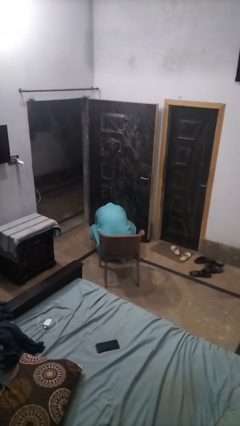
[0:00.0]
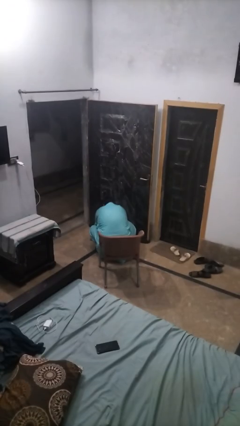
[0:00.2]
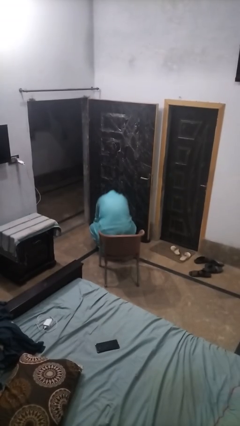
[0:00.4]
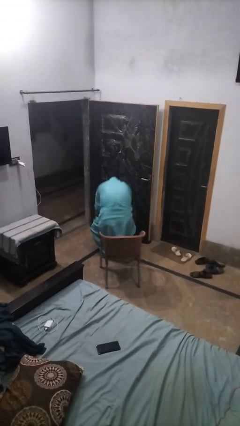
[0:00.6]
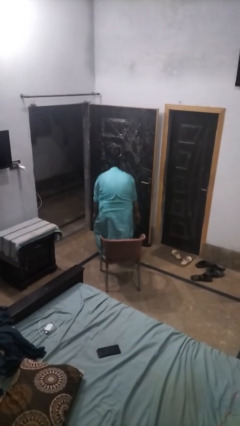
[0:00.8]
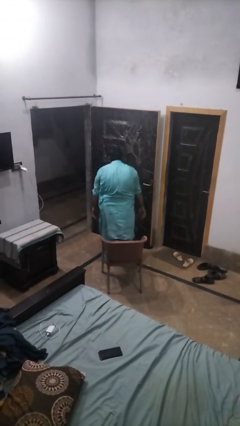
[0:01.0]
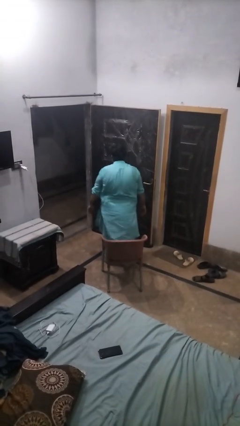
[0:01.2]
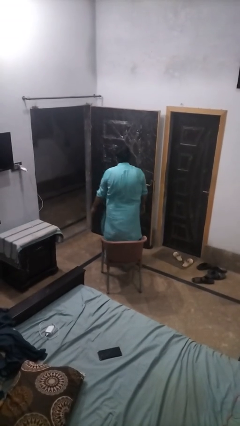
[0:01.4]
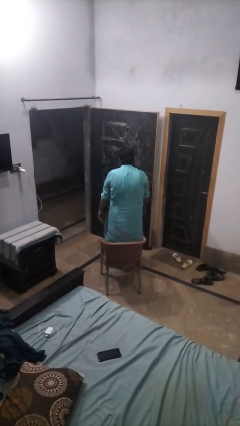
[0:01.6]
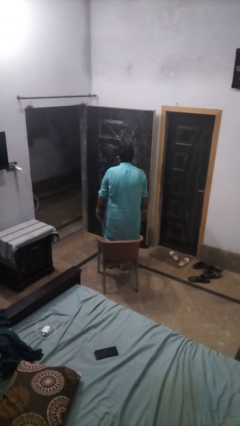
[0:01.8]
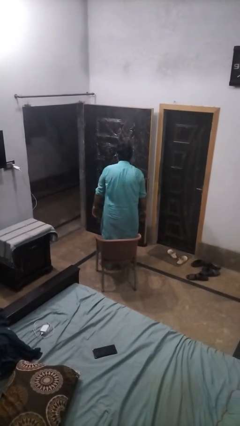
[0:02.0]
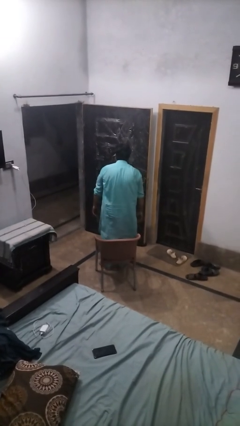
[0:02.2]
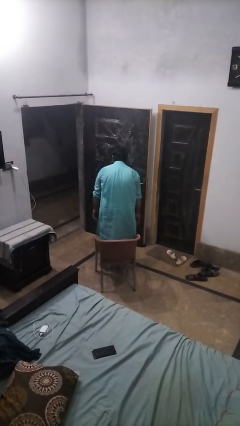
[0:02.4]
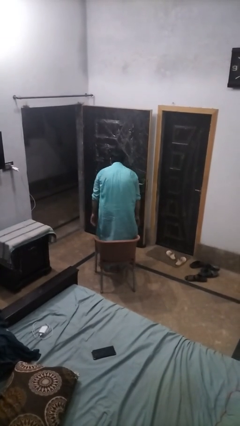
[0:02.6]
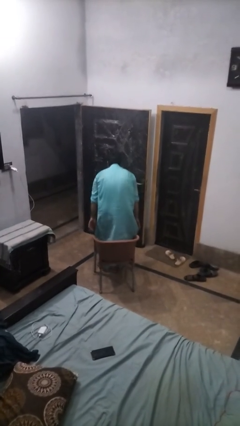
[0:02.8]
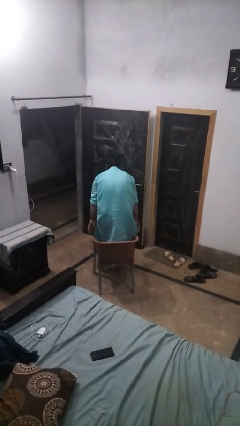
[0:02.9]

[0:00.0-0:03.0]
person stands up from floor

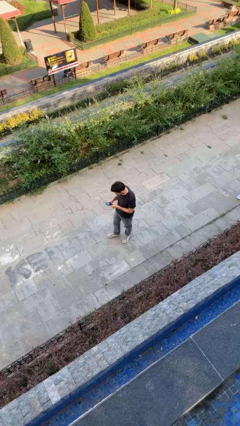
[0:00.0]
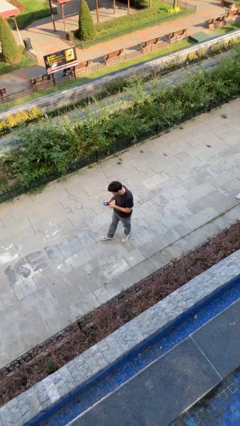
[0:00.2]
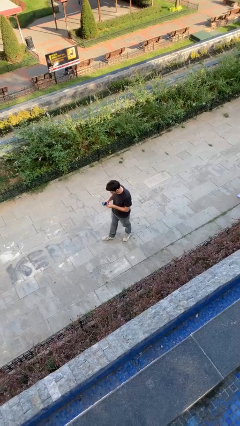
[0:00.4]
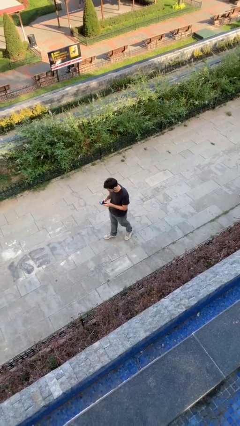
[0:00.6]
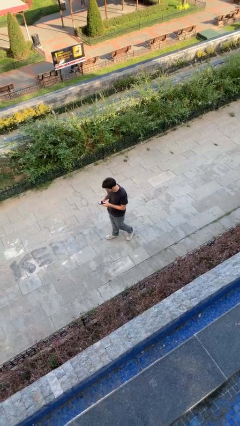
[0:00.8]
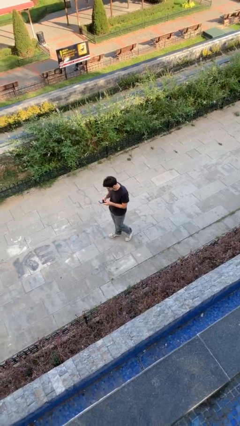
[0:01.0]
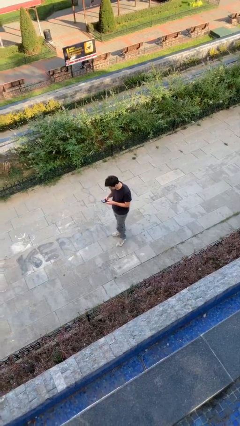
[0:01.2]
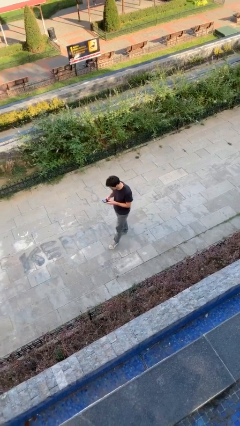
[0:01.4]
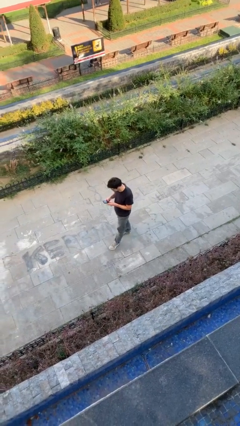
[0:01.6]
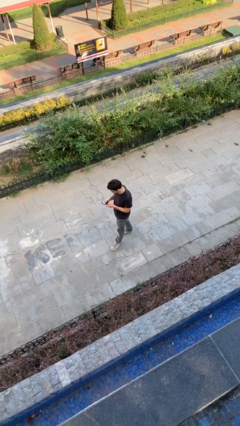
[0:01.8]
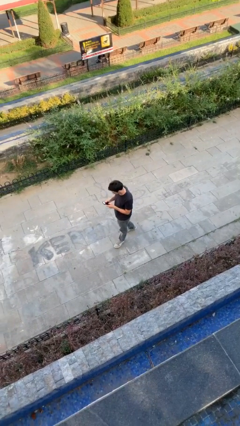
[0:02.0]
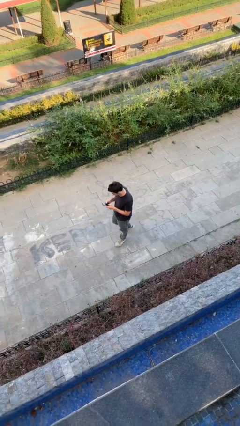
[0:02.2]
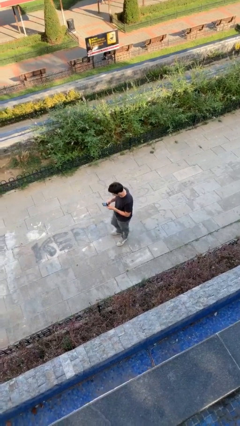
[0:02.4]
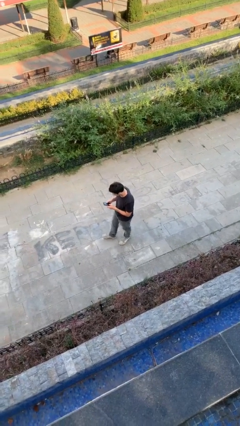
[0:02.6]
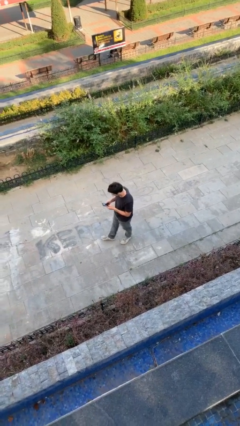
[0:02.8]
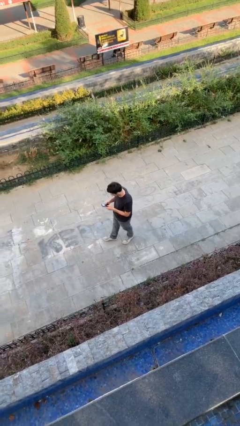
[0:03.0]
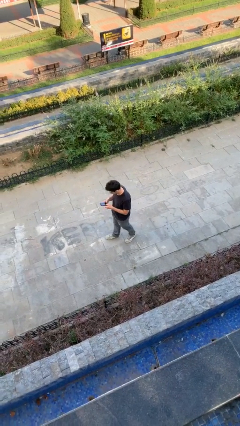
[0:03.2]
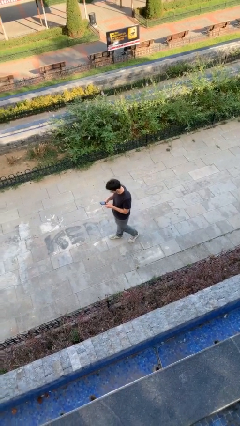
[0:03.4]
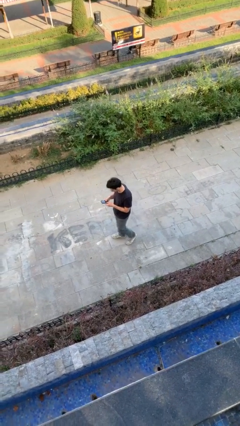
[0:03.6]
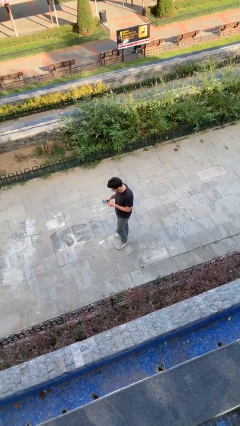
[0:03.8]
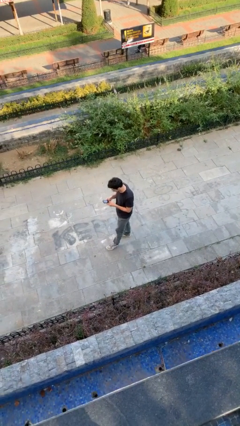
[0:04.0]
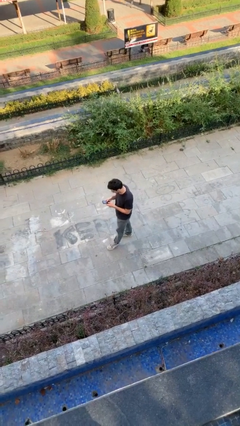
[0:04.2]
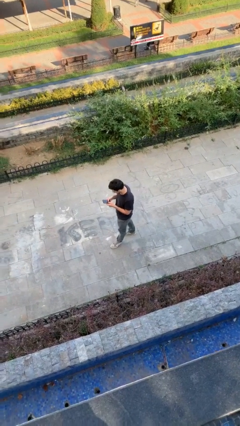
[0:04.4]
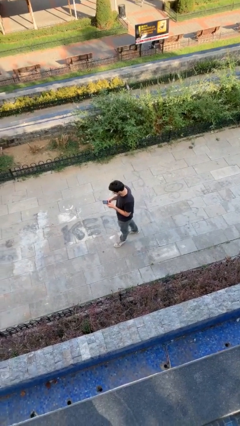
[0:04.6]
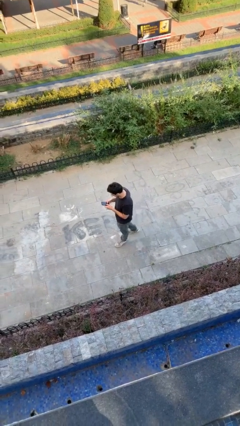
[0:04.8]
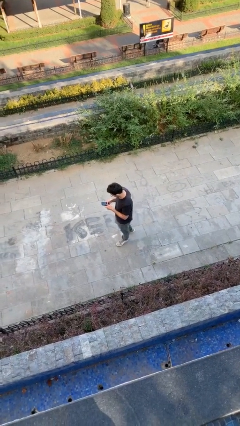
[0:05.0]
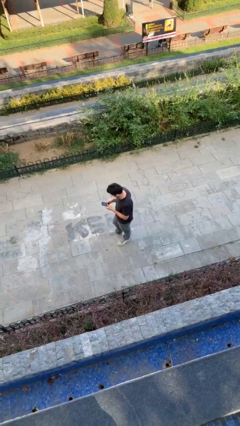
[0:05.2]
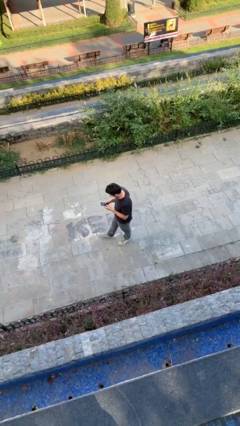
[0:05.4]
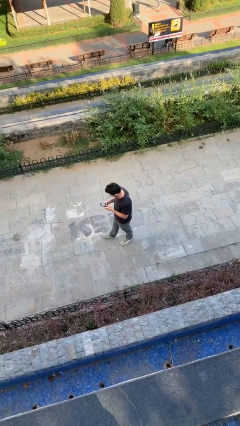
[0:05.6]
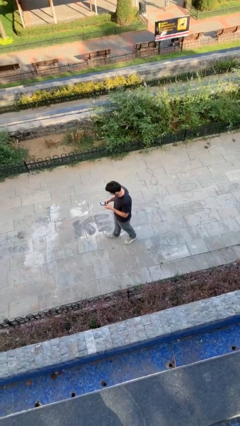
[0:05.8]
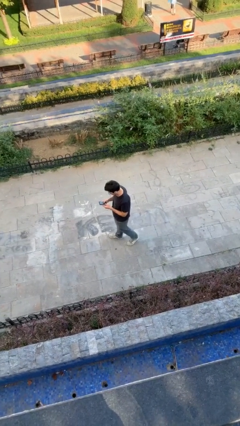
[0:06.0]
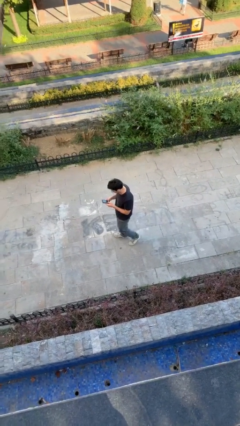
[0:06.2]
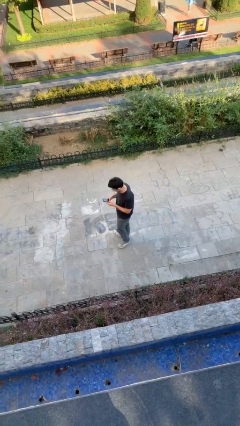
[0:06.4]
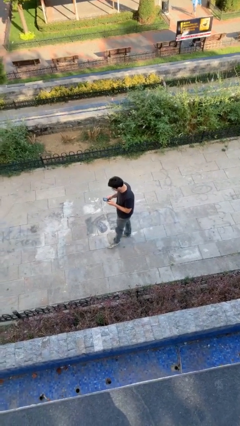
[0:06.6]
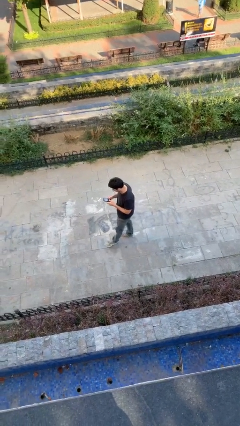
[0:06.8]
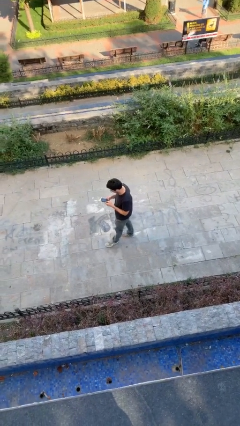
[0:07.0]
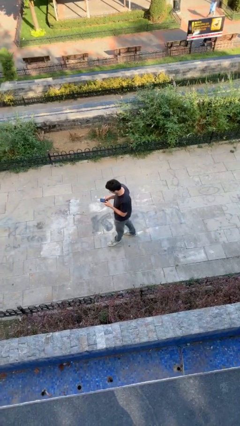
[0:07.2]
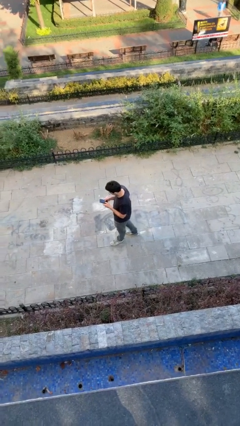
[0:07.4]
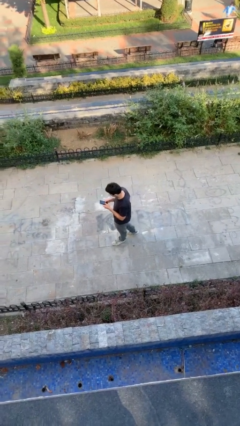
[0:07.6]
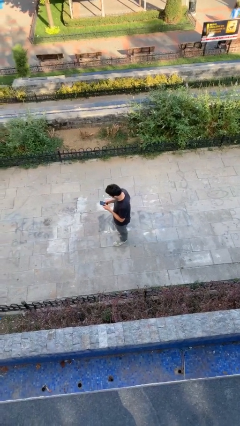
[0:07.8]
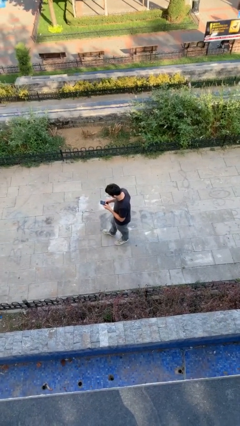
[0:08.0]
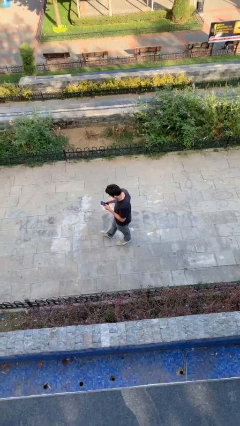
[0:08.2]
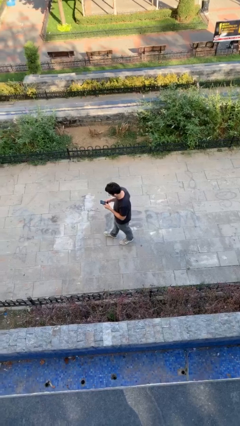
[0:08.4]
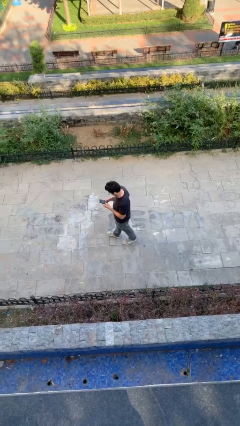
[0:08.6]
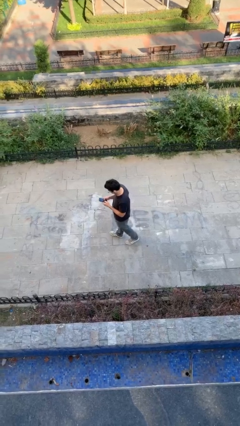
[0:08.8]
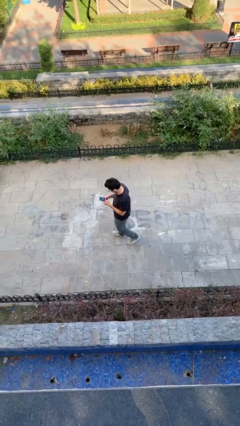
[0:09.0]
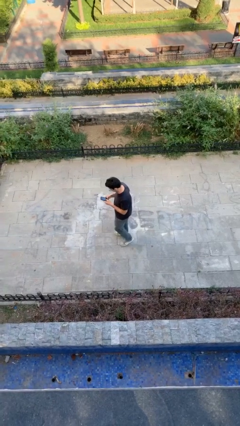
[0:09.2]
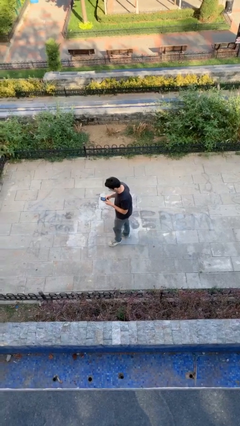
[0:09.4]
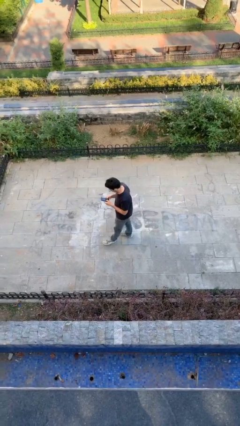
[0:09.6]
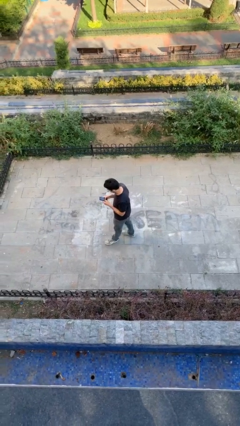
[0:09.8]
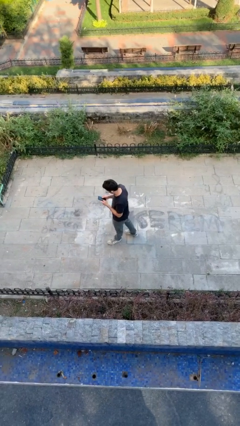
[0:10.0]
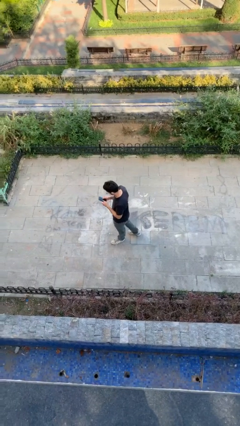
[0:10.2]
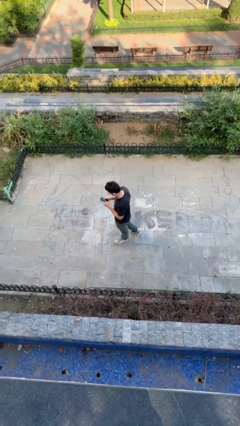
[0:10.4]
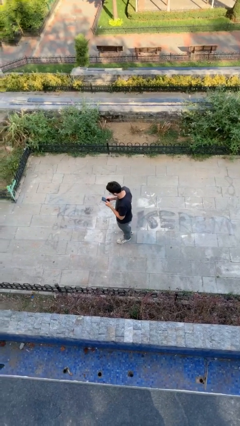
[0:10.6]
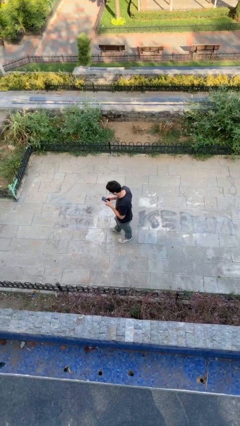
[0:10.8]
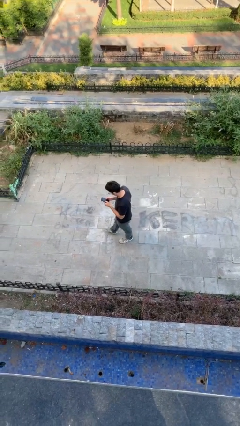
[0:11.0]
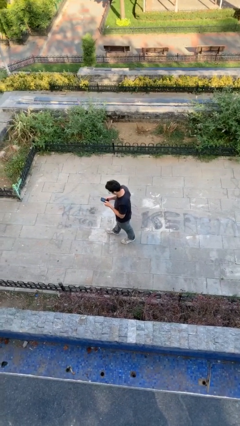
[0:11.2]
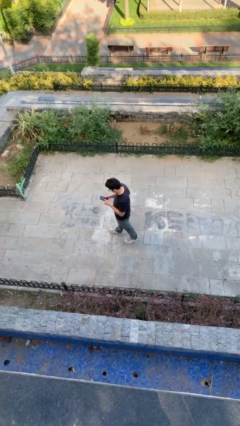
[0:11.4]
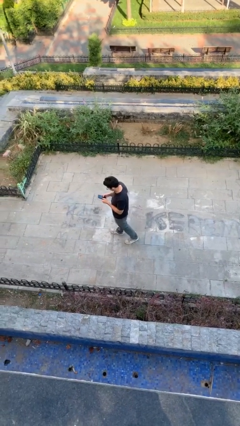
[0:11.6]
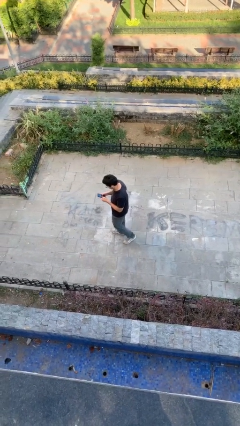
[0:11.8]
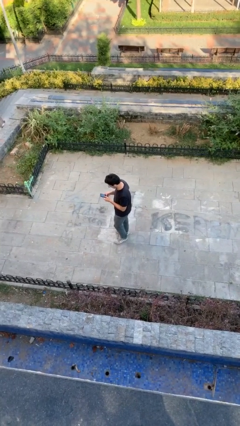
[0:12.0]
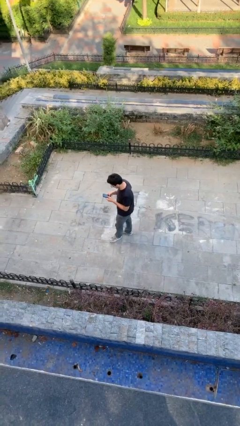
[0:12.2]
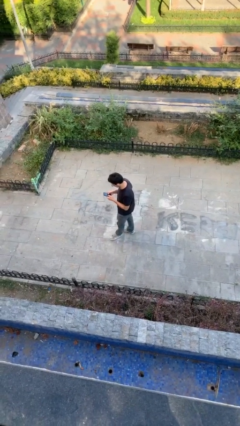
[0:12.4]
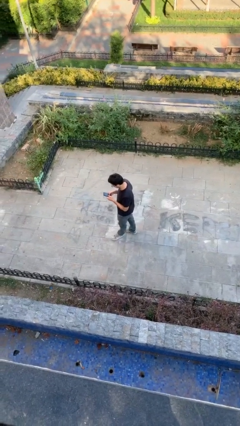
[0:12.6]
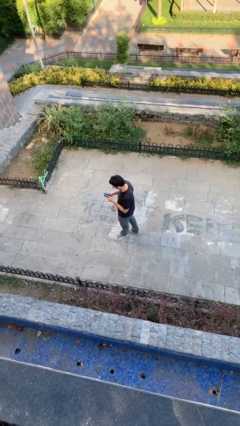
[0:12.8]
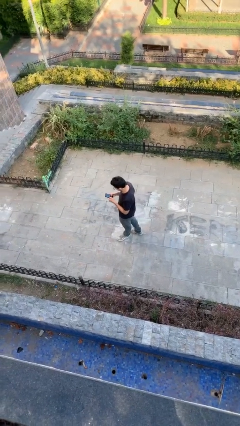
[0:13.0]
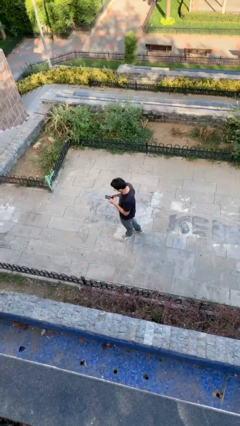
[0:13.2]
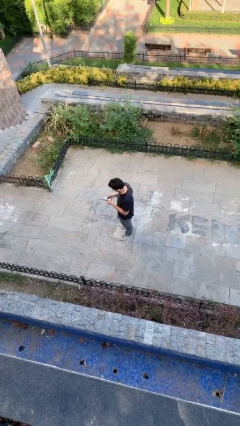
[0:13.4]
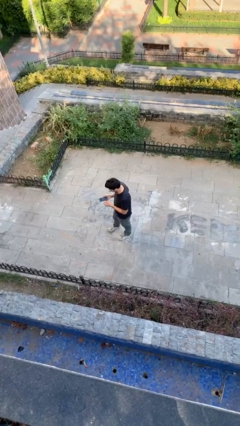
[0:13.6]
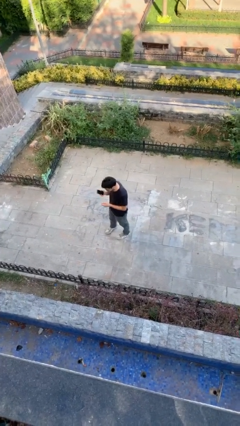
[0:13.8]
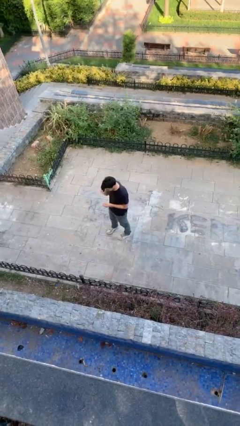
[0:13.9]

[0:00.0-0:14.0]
person texts on phone

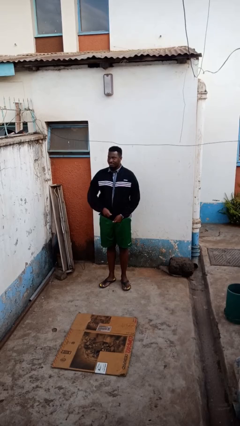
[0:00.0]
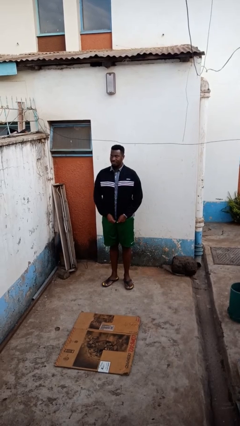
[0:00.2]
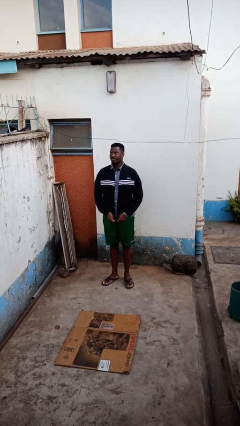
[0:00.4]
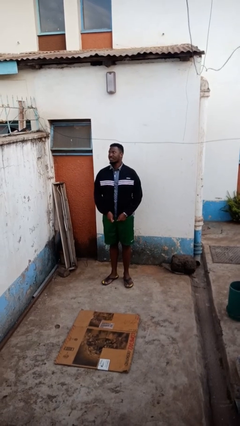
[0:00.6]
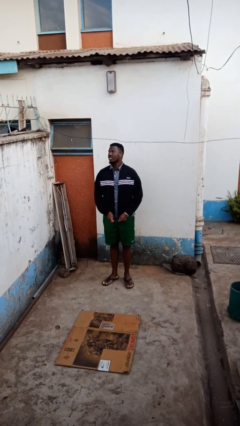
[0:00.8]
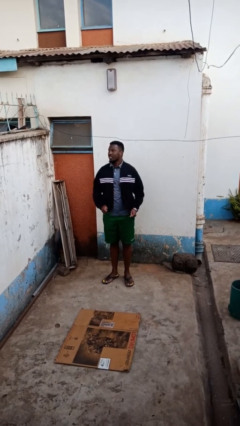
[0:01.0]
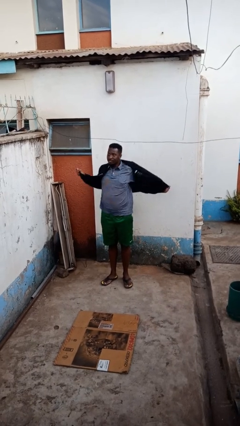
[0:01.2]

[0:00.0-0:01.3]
person unzips jacket
